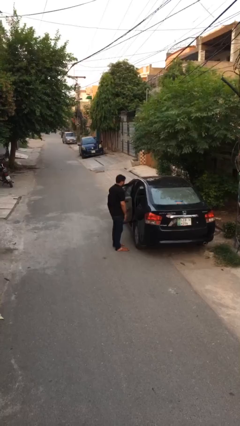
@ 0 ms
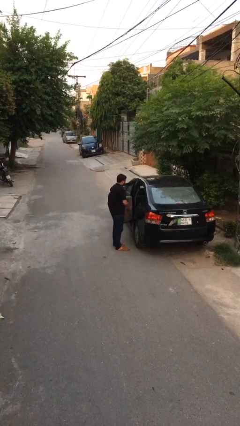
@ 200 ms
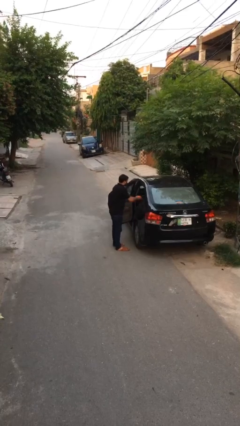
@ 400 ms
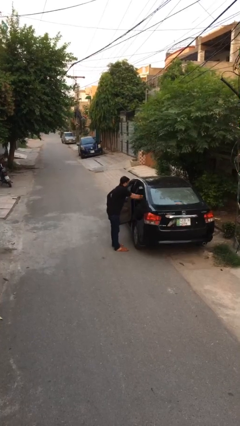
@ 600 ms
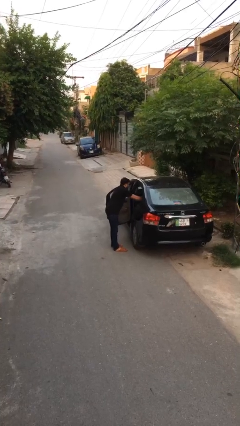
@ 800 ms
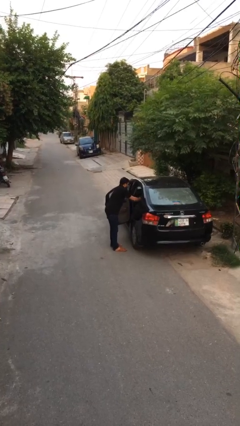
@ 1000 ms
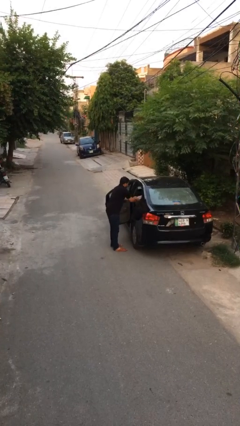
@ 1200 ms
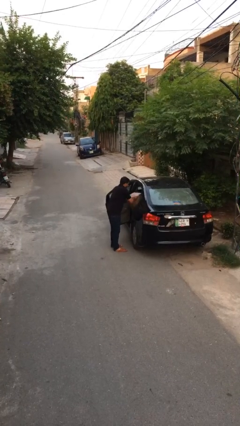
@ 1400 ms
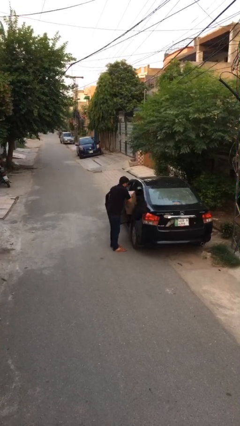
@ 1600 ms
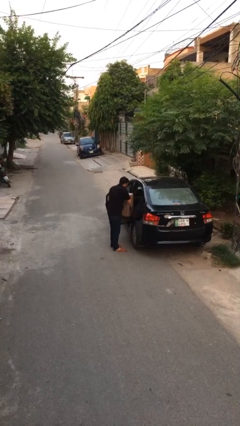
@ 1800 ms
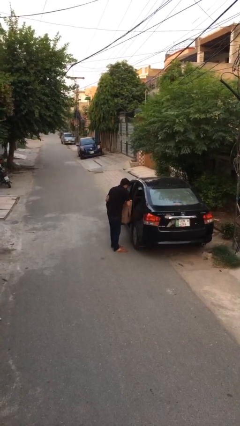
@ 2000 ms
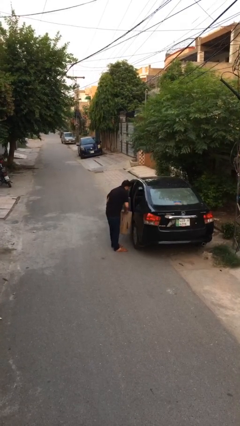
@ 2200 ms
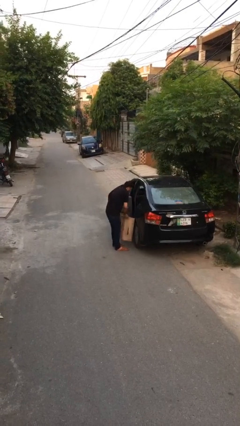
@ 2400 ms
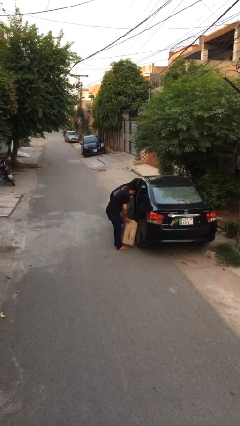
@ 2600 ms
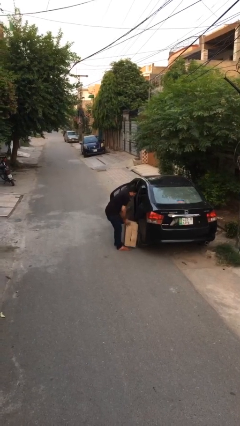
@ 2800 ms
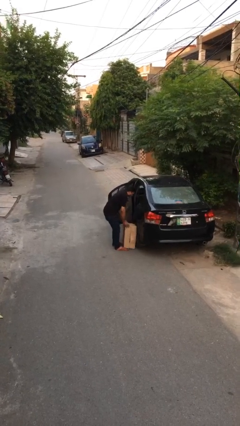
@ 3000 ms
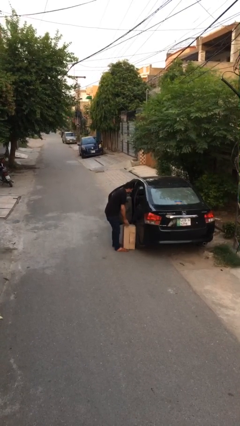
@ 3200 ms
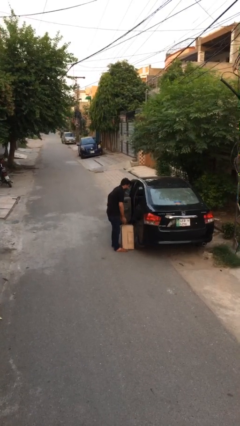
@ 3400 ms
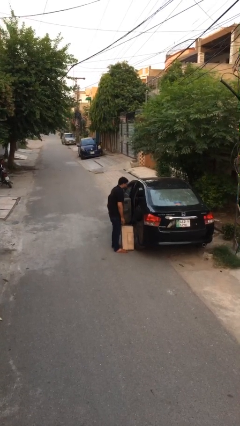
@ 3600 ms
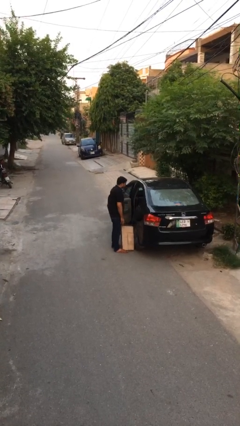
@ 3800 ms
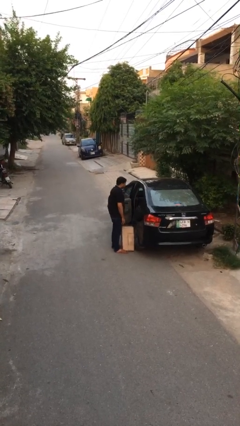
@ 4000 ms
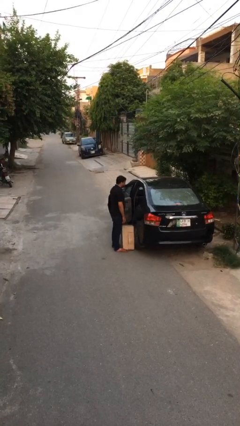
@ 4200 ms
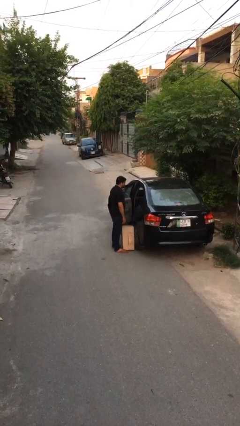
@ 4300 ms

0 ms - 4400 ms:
person unloads car

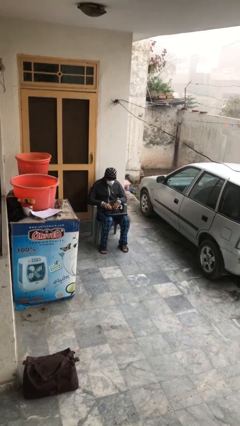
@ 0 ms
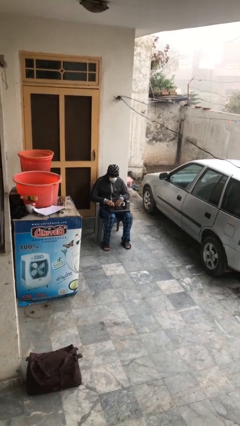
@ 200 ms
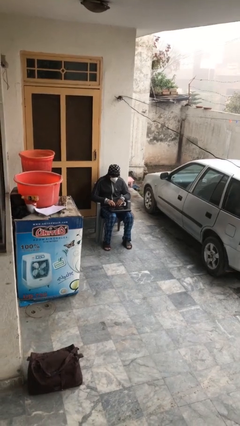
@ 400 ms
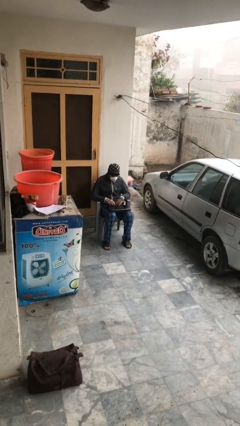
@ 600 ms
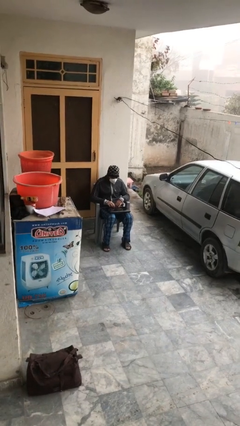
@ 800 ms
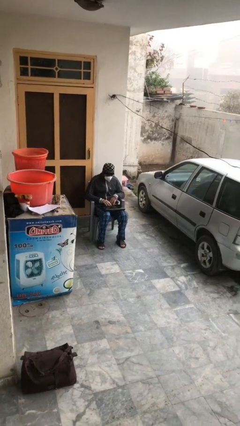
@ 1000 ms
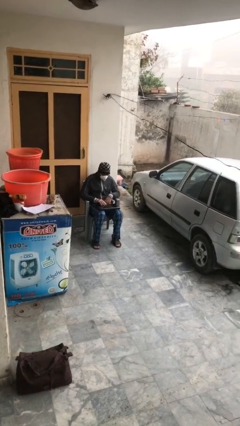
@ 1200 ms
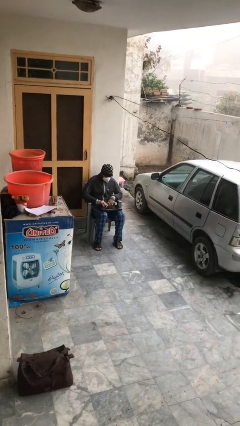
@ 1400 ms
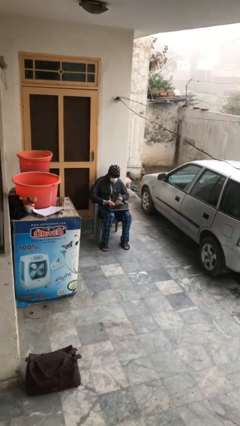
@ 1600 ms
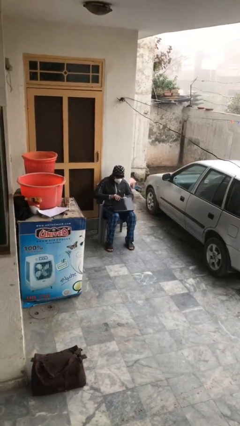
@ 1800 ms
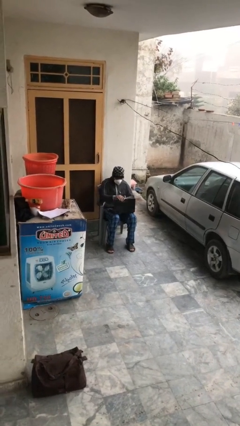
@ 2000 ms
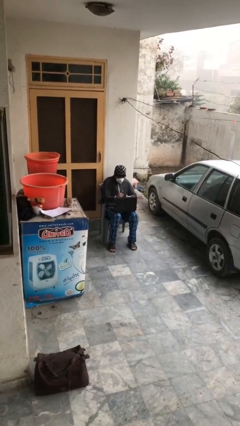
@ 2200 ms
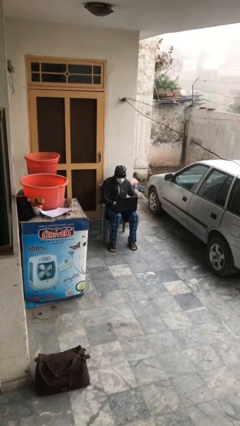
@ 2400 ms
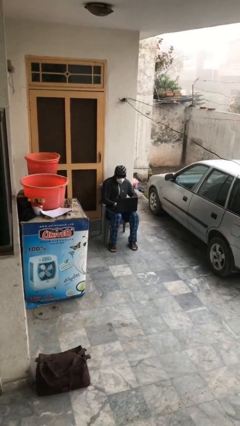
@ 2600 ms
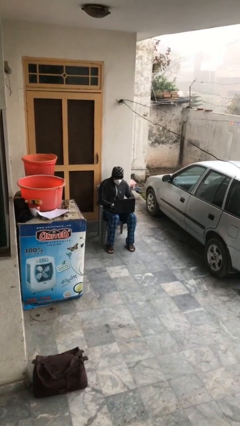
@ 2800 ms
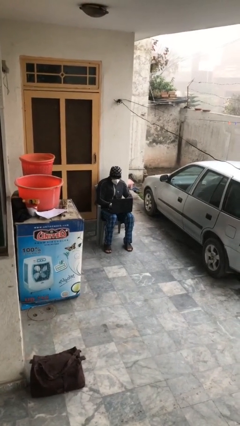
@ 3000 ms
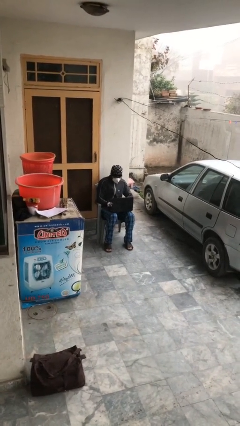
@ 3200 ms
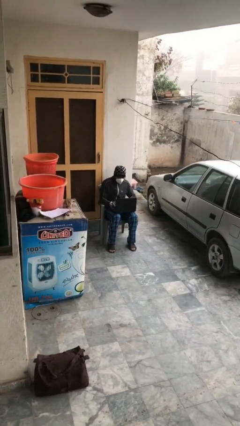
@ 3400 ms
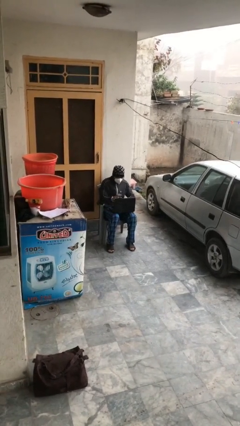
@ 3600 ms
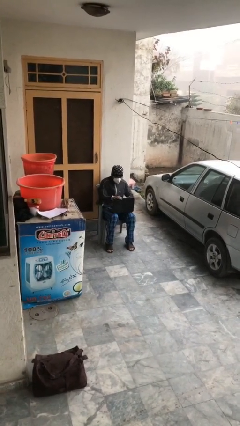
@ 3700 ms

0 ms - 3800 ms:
person interacts with laptop

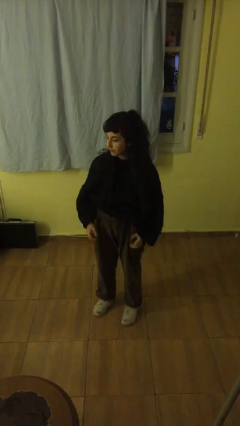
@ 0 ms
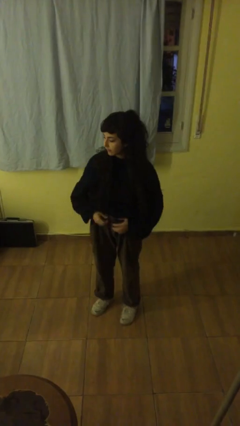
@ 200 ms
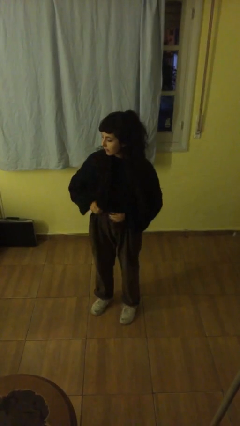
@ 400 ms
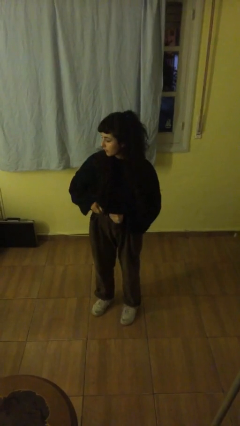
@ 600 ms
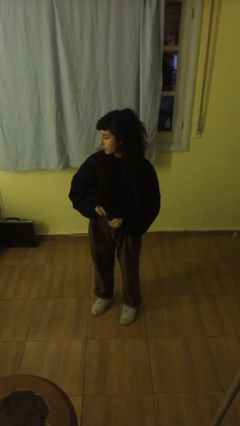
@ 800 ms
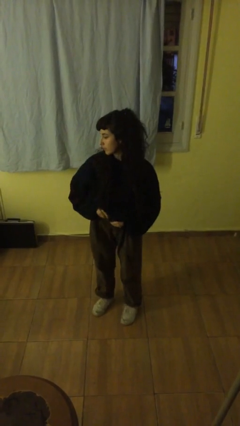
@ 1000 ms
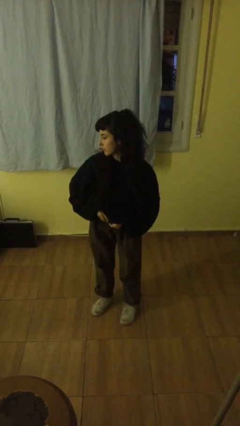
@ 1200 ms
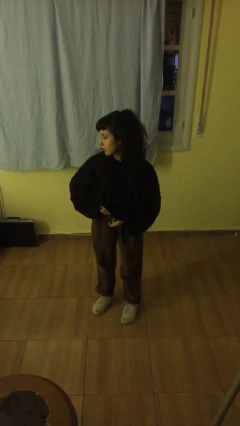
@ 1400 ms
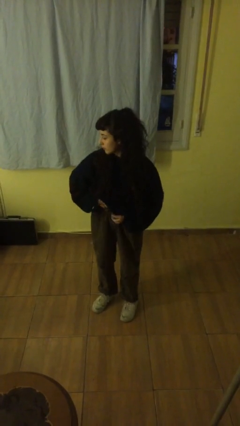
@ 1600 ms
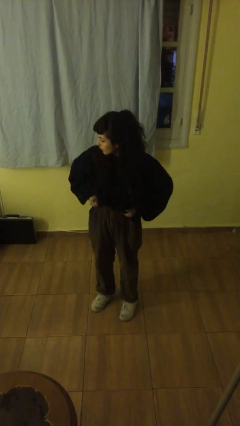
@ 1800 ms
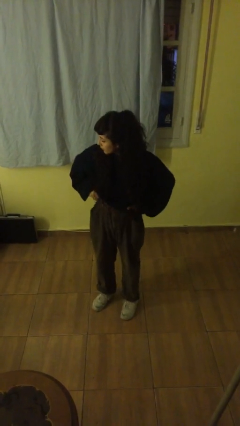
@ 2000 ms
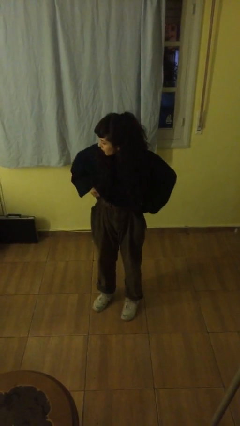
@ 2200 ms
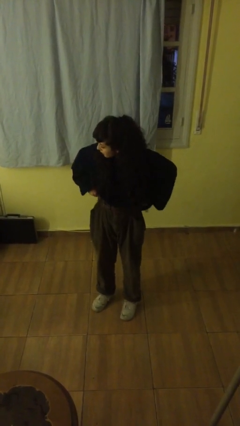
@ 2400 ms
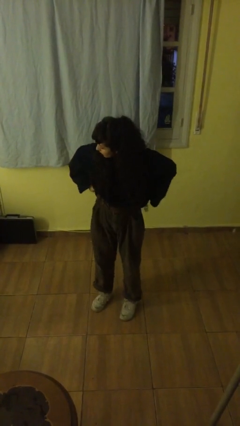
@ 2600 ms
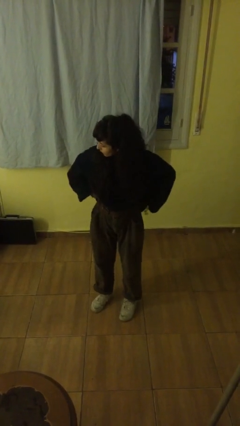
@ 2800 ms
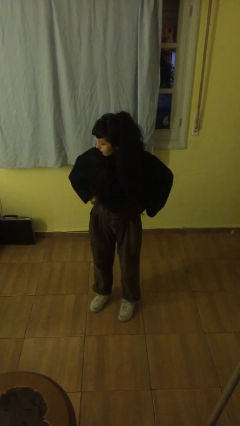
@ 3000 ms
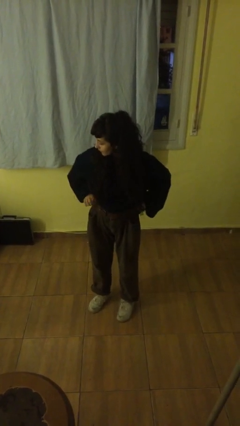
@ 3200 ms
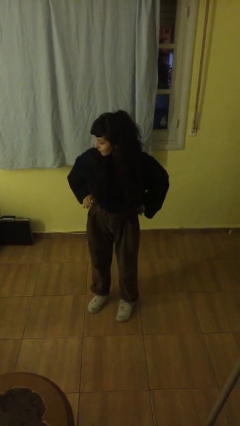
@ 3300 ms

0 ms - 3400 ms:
person hikes up pants

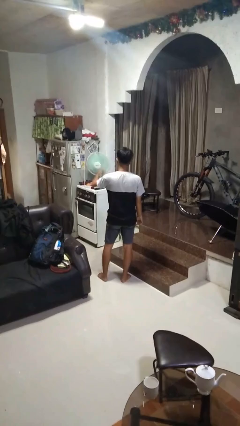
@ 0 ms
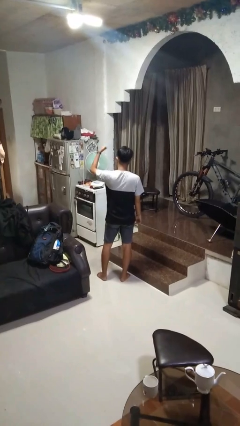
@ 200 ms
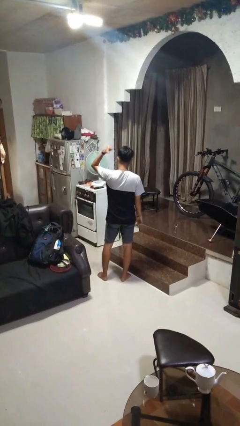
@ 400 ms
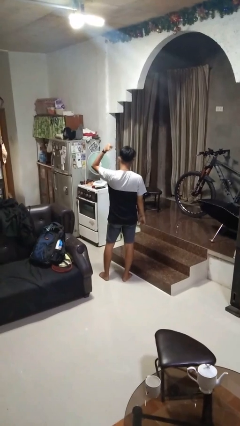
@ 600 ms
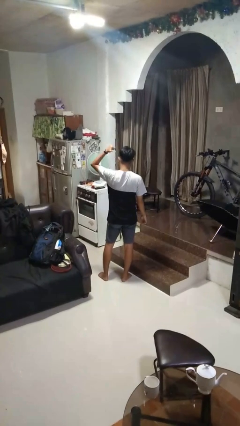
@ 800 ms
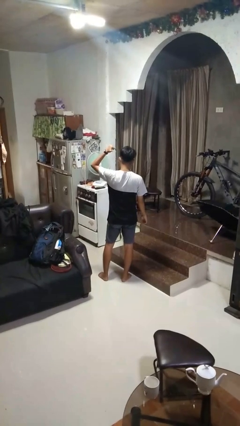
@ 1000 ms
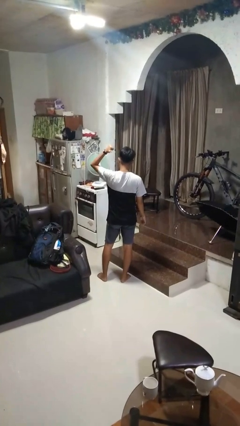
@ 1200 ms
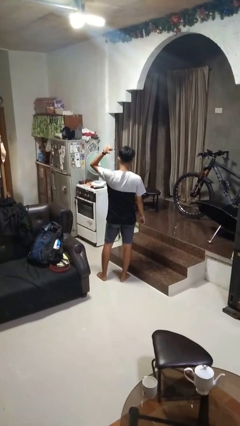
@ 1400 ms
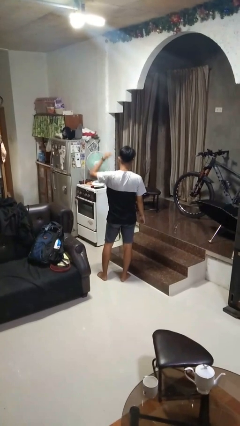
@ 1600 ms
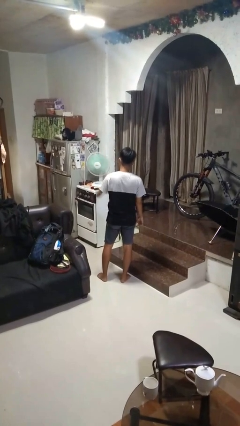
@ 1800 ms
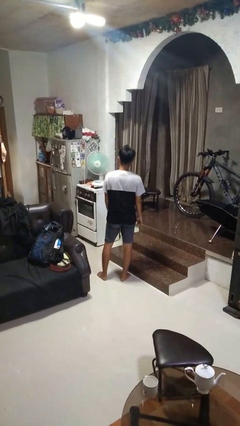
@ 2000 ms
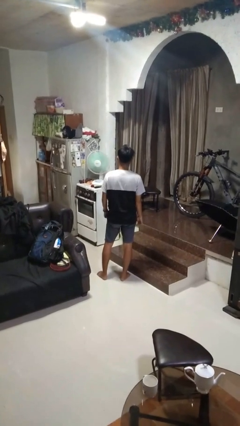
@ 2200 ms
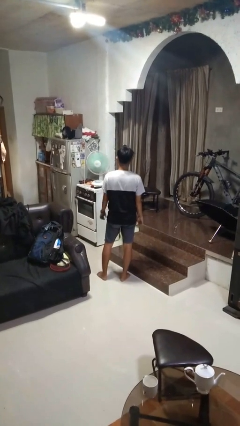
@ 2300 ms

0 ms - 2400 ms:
person gestures behind me

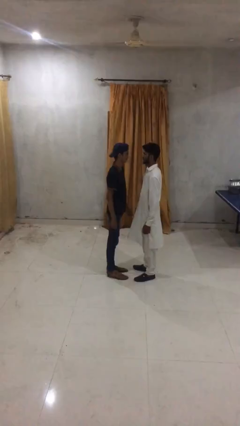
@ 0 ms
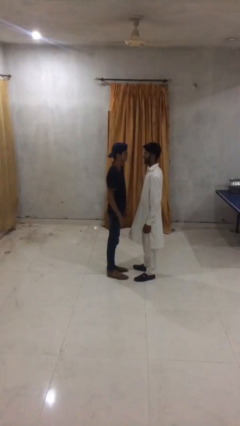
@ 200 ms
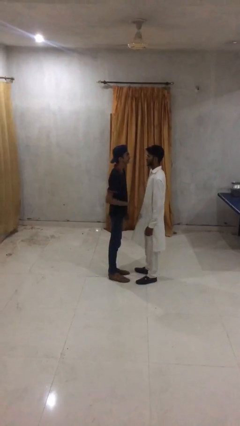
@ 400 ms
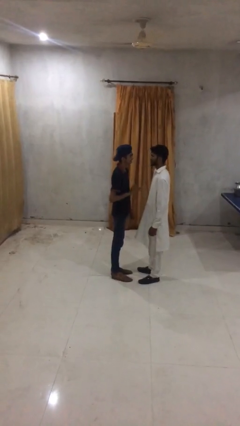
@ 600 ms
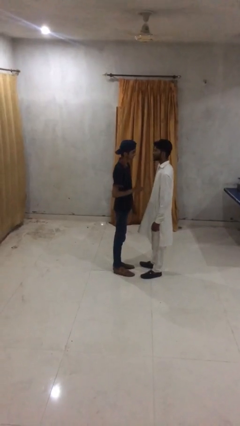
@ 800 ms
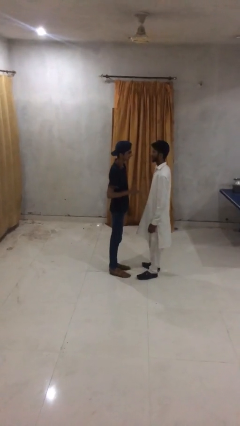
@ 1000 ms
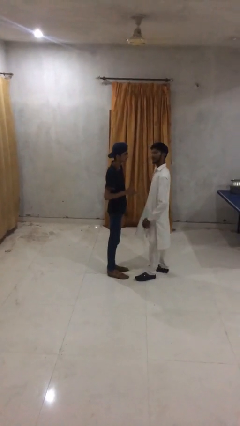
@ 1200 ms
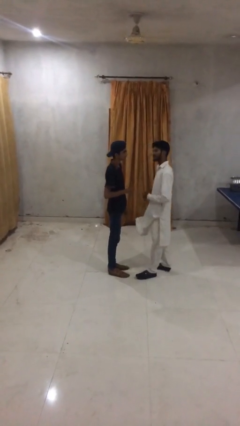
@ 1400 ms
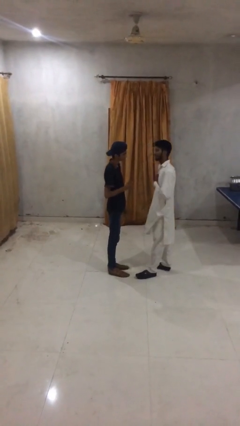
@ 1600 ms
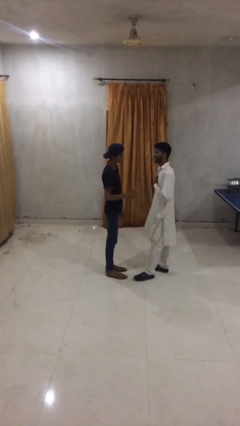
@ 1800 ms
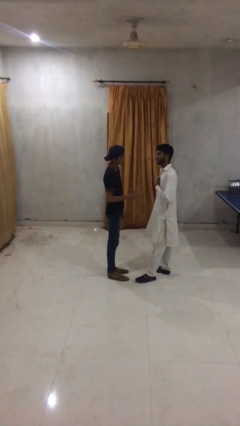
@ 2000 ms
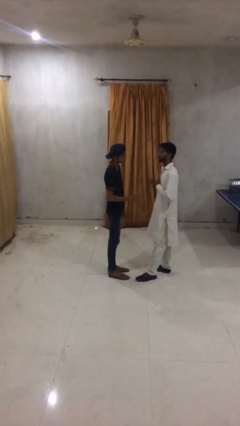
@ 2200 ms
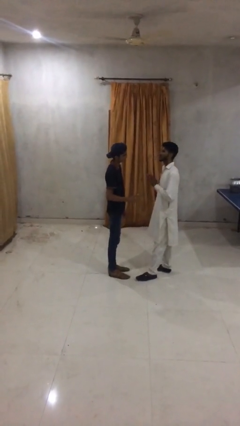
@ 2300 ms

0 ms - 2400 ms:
person talks to person

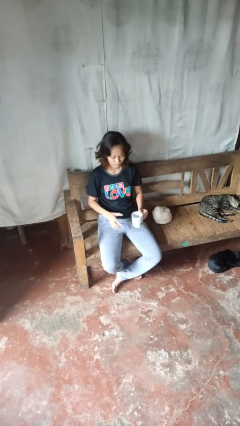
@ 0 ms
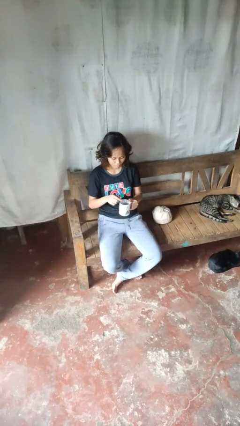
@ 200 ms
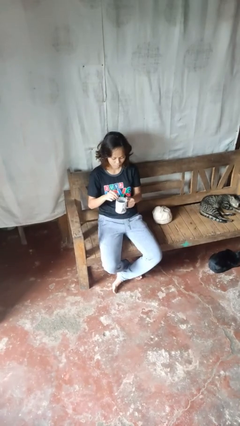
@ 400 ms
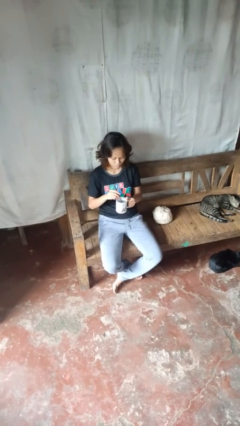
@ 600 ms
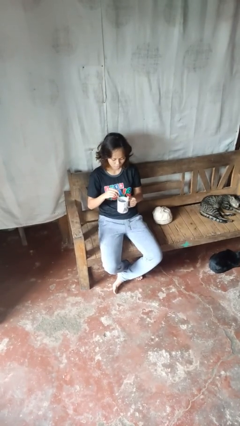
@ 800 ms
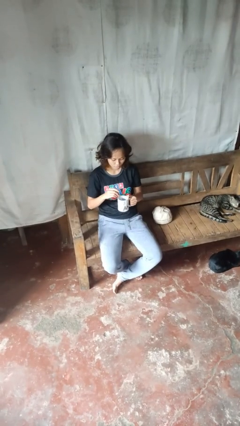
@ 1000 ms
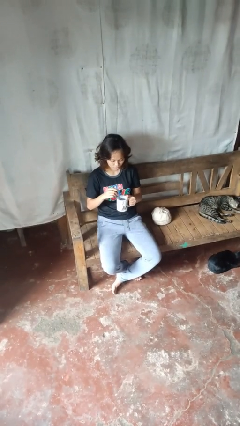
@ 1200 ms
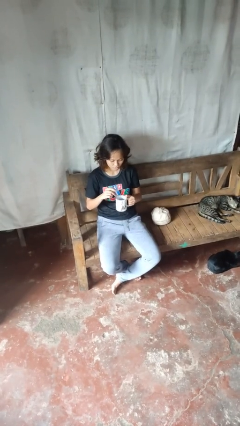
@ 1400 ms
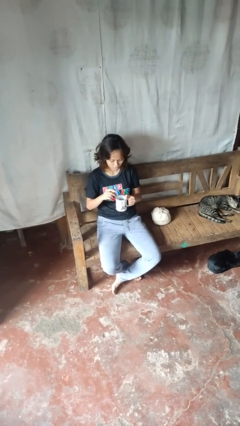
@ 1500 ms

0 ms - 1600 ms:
person stirs mug
